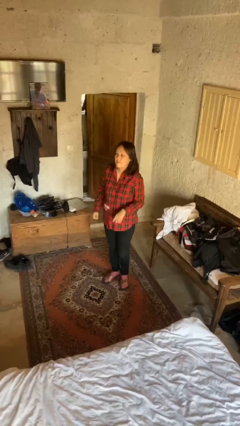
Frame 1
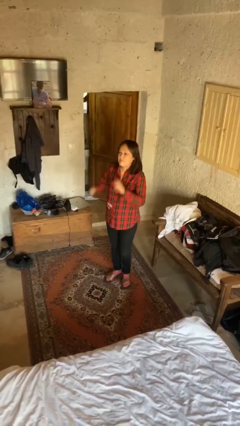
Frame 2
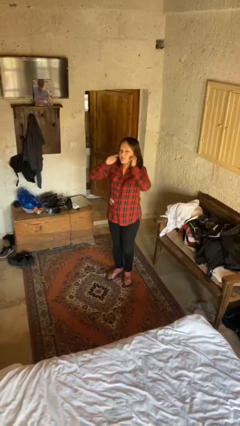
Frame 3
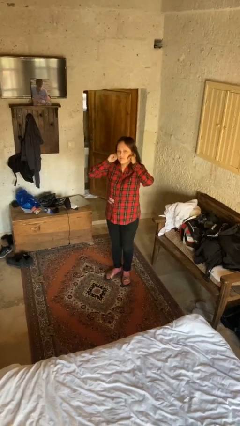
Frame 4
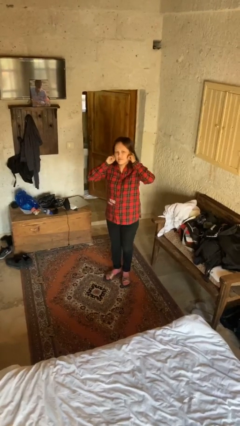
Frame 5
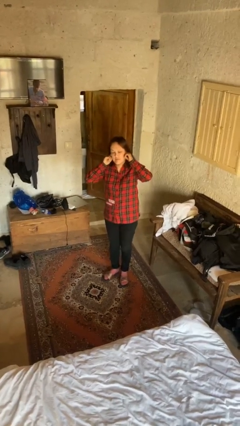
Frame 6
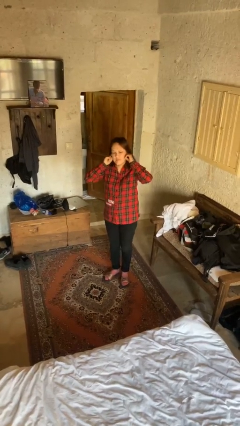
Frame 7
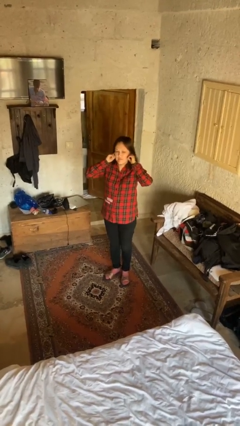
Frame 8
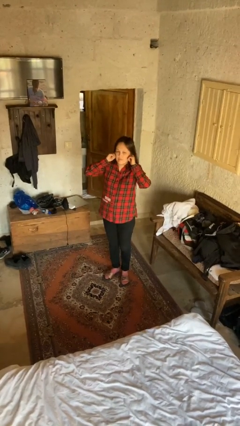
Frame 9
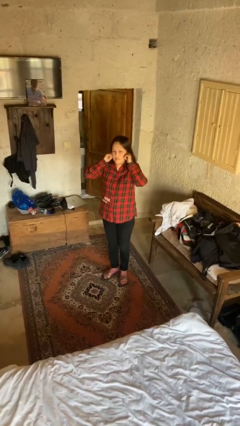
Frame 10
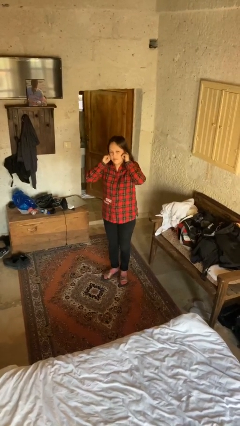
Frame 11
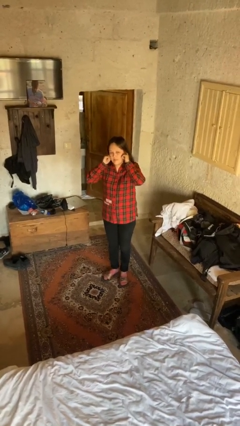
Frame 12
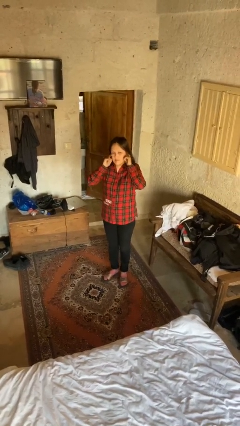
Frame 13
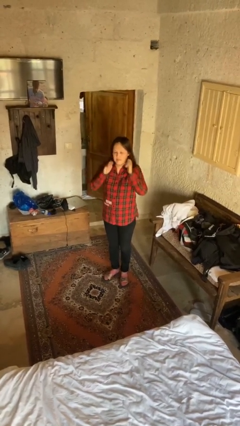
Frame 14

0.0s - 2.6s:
person puts fingers in ear

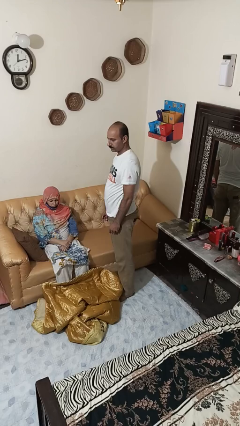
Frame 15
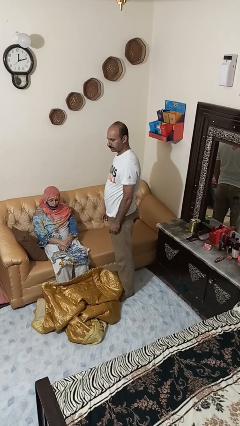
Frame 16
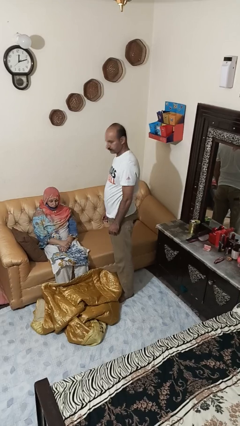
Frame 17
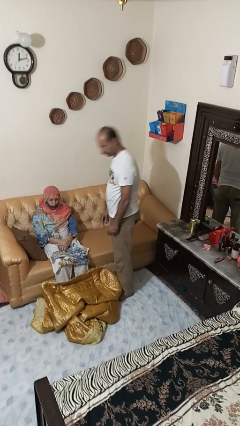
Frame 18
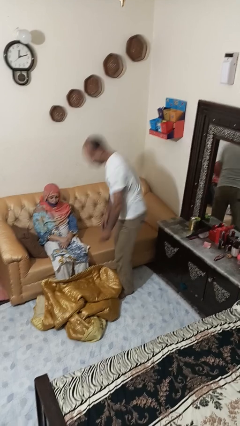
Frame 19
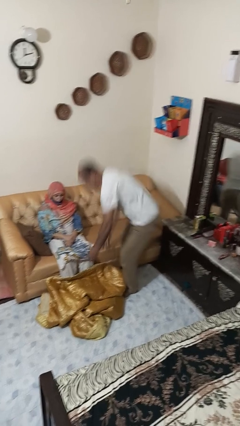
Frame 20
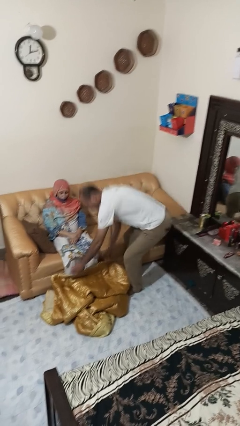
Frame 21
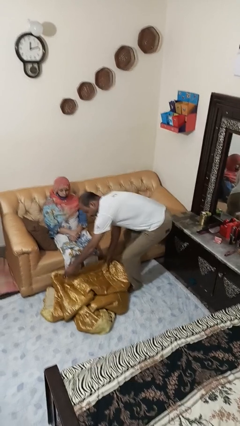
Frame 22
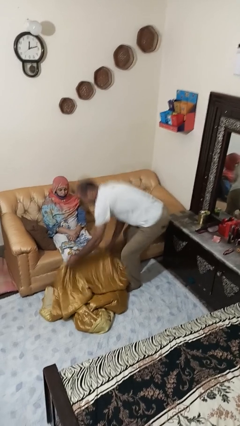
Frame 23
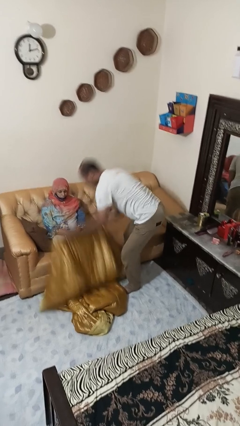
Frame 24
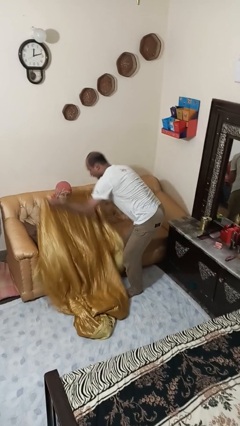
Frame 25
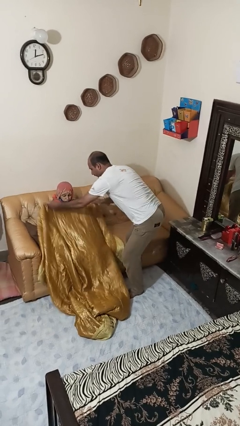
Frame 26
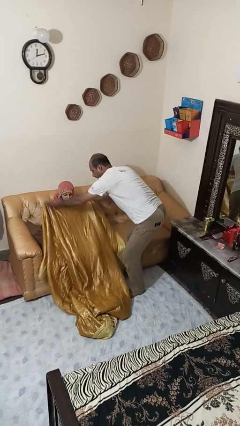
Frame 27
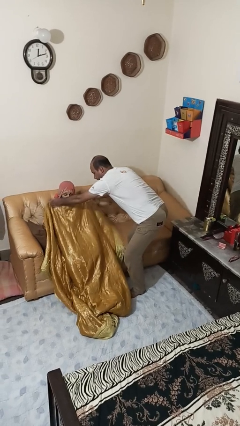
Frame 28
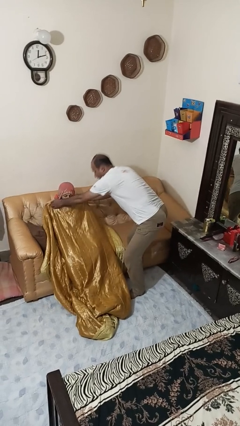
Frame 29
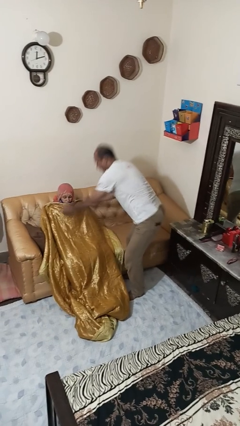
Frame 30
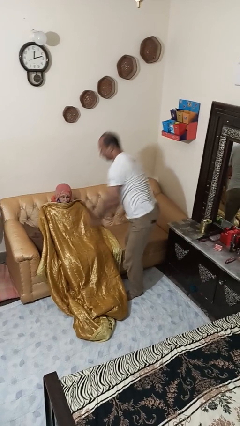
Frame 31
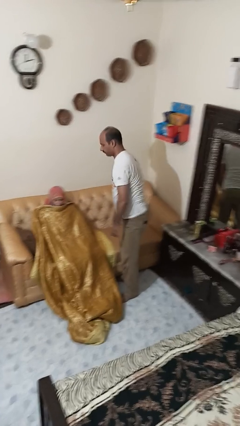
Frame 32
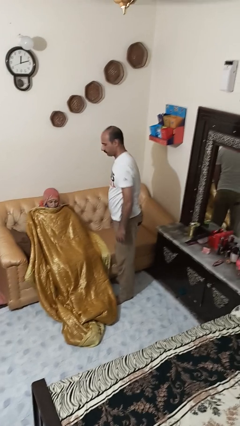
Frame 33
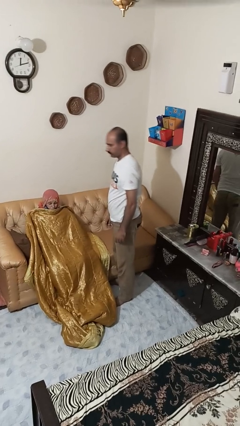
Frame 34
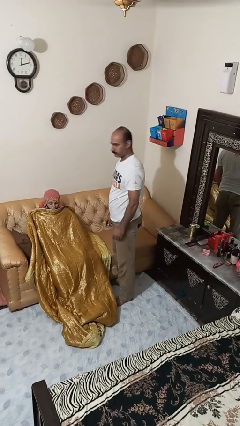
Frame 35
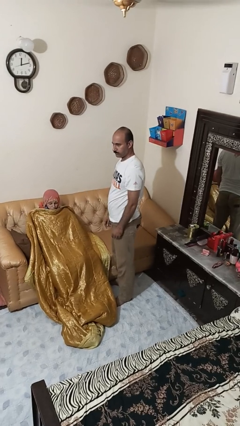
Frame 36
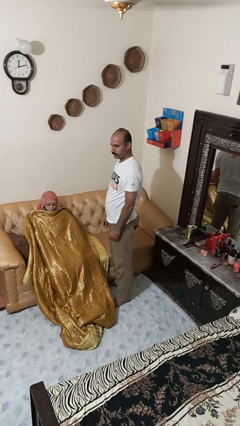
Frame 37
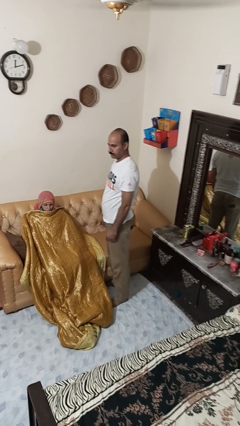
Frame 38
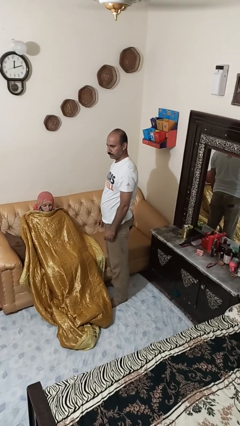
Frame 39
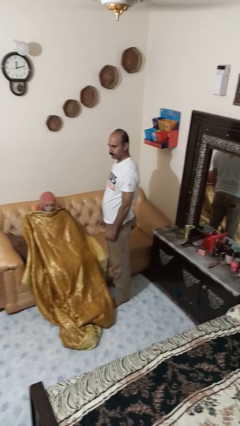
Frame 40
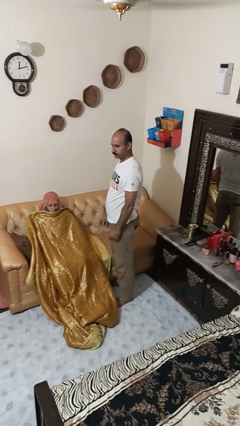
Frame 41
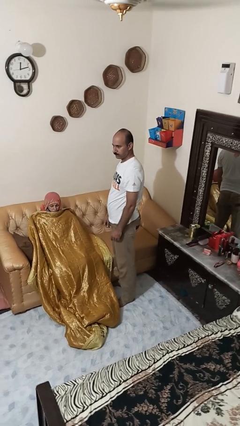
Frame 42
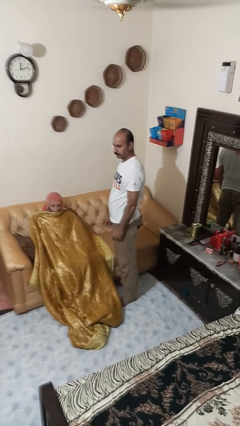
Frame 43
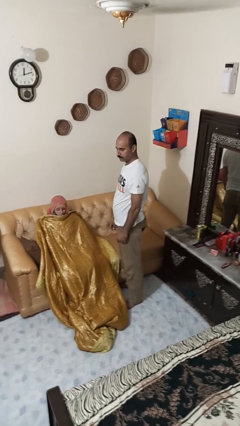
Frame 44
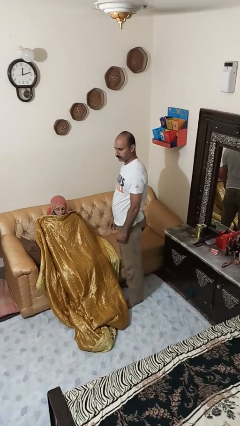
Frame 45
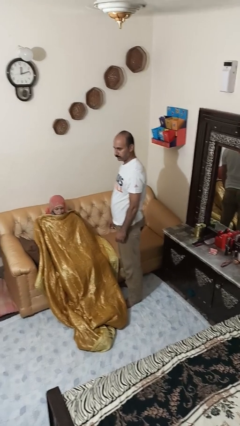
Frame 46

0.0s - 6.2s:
person covers friend with blanket

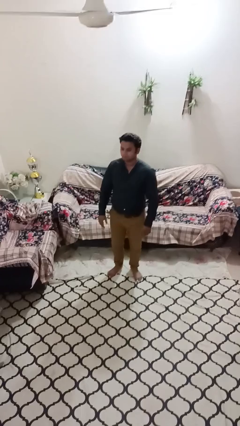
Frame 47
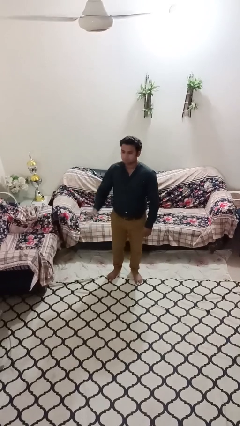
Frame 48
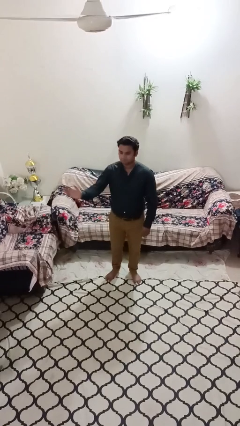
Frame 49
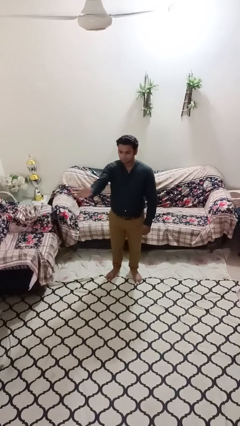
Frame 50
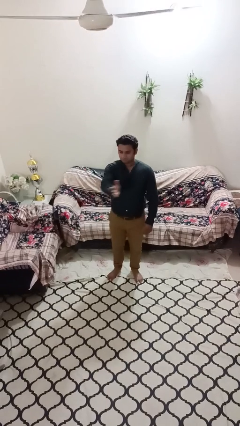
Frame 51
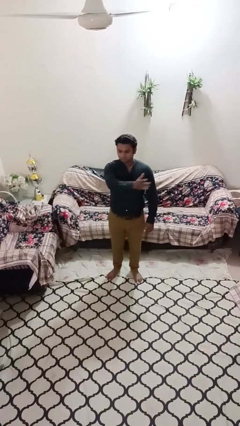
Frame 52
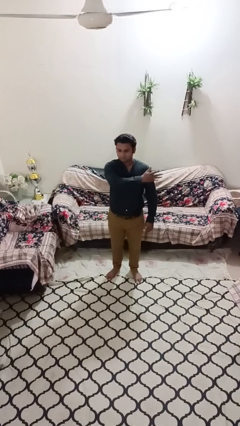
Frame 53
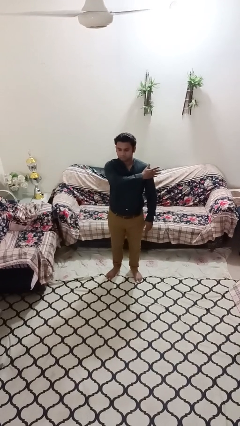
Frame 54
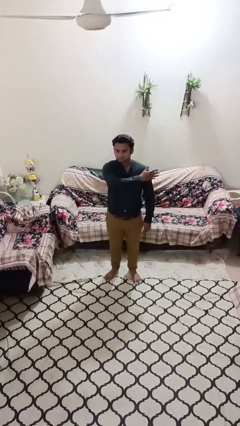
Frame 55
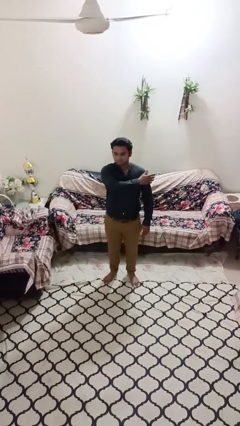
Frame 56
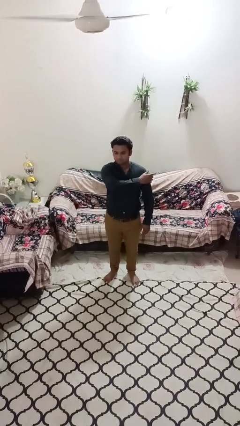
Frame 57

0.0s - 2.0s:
person gestures swipe left

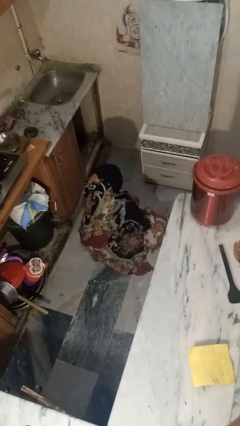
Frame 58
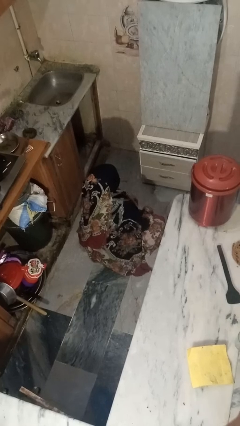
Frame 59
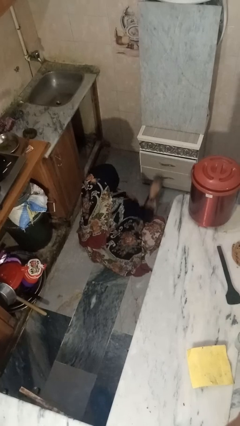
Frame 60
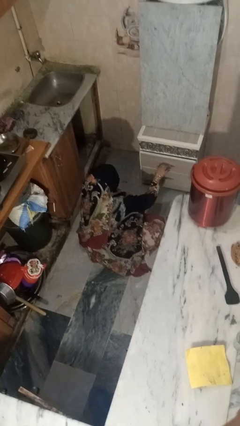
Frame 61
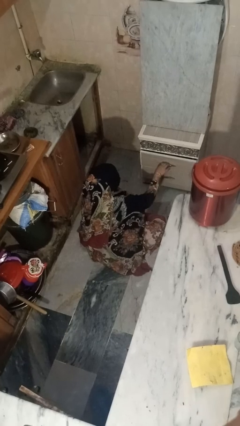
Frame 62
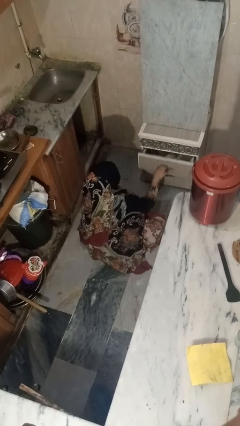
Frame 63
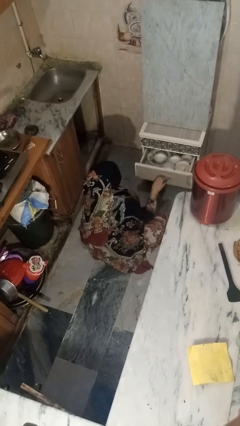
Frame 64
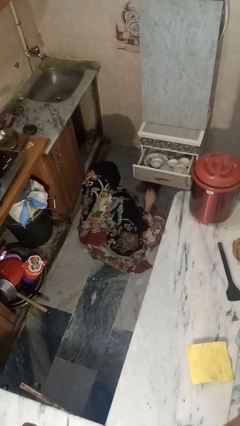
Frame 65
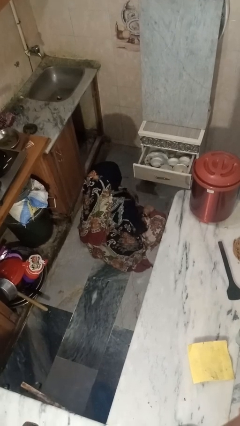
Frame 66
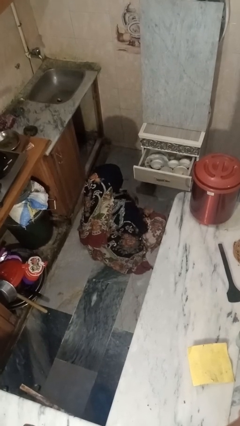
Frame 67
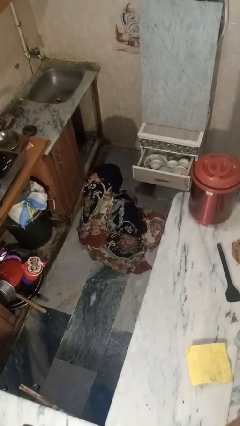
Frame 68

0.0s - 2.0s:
person opens kitchen drawer

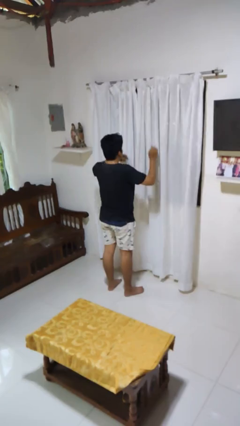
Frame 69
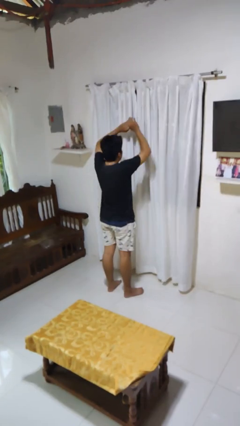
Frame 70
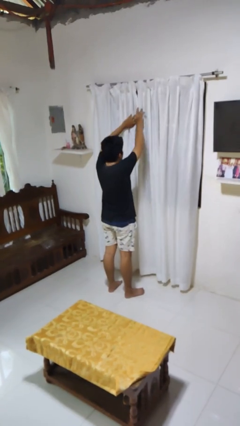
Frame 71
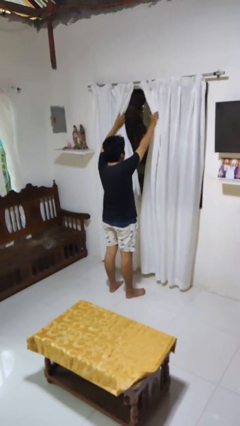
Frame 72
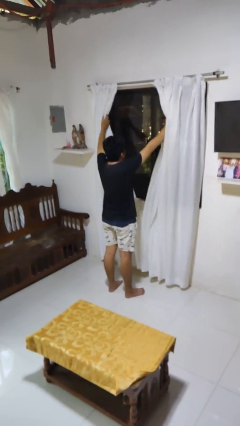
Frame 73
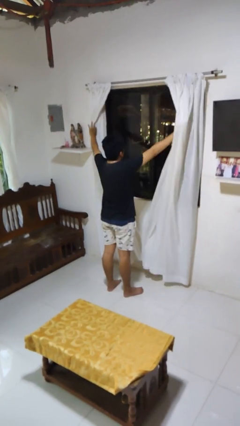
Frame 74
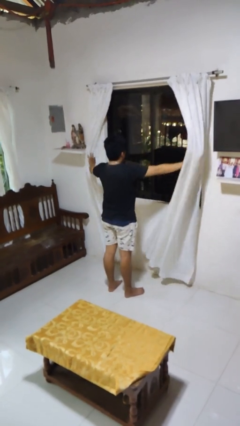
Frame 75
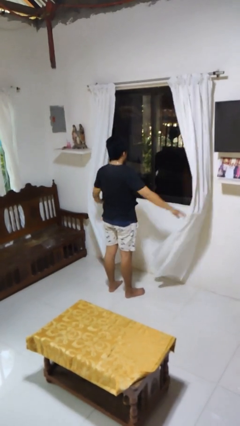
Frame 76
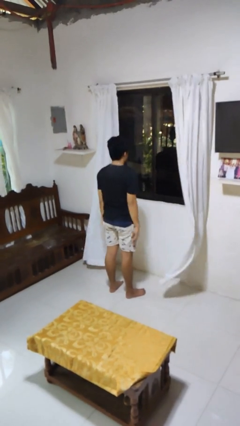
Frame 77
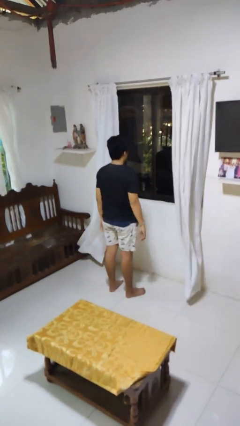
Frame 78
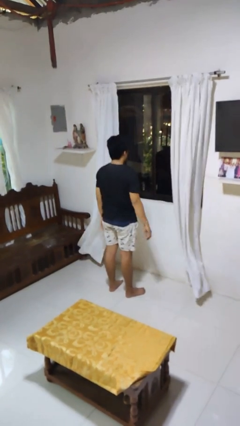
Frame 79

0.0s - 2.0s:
person opens curtains

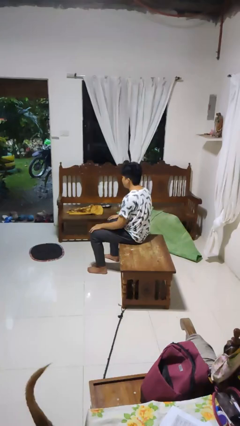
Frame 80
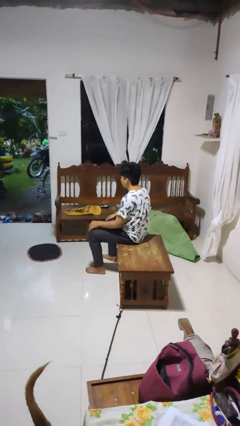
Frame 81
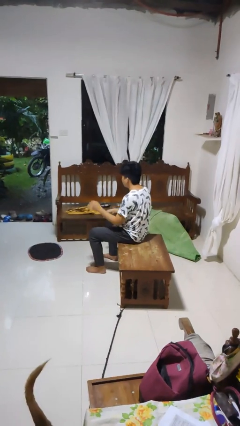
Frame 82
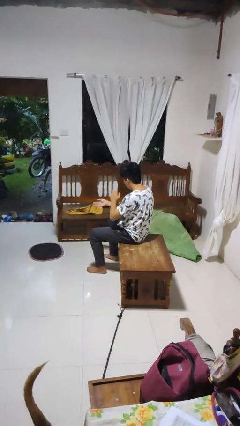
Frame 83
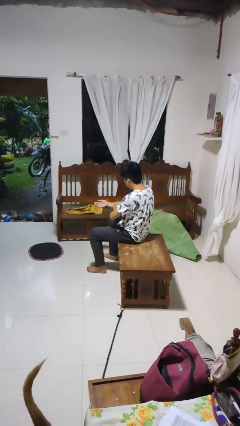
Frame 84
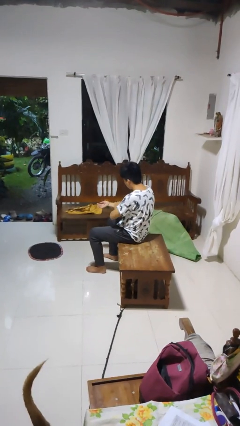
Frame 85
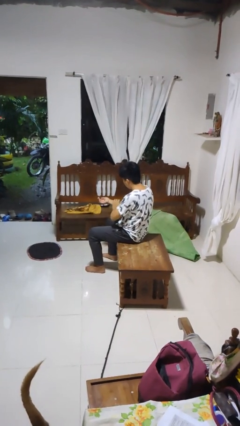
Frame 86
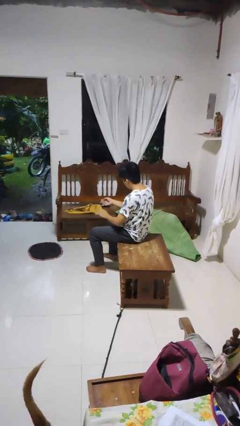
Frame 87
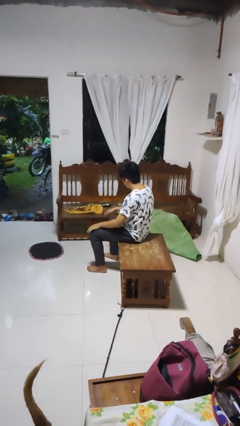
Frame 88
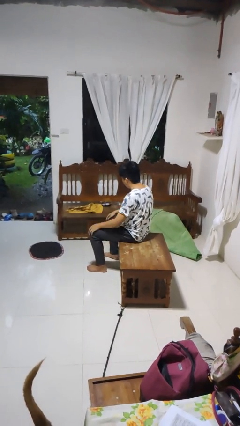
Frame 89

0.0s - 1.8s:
person swats bug

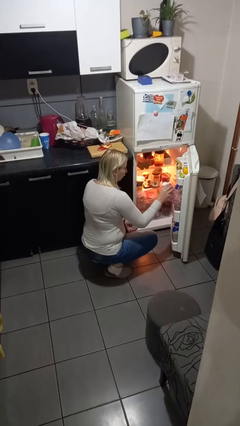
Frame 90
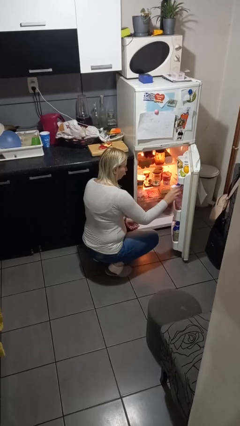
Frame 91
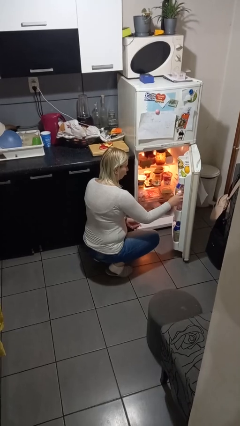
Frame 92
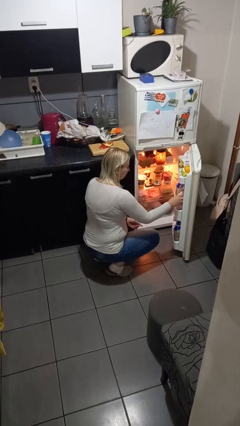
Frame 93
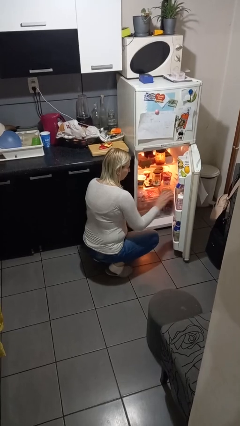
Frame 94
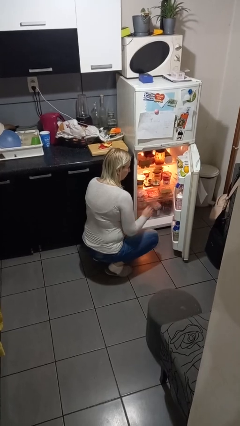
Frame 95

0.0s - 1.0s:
person puts object into refrigerator
